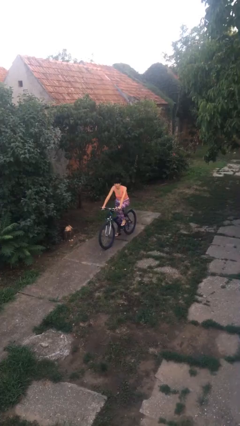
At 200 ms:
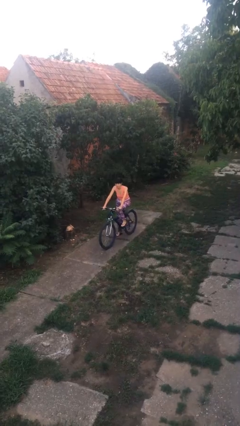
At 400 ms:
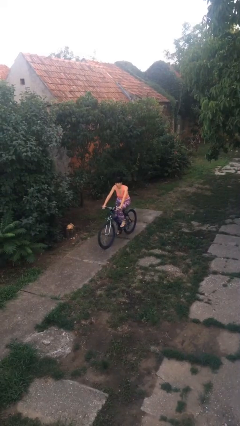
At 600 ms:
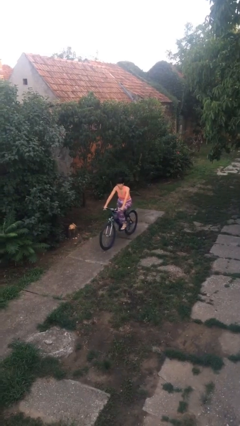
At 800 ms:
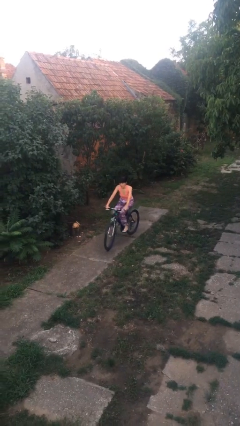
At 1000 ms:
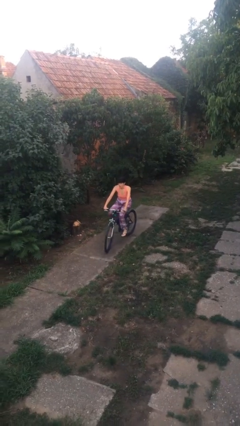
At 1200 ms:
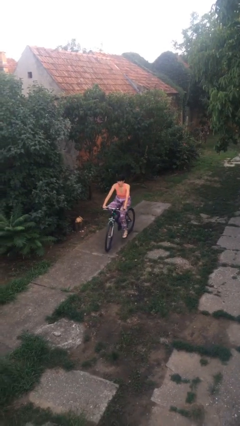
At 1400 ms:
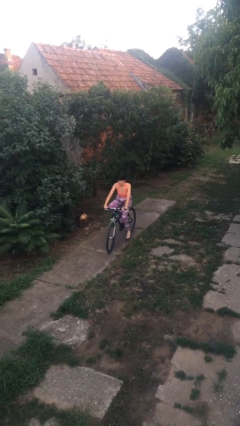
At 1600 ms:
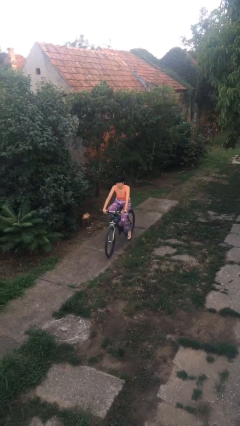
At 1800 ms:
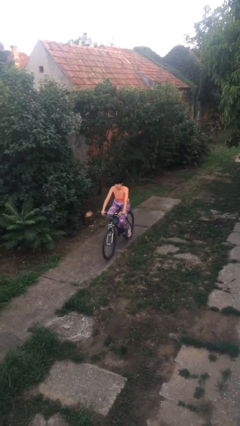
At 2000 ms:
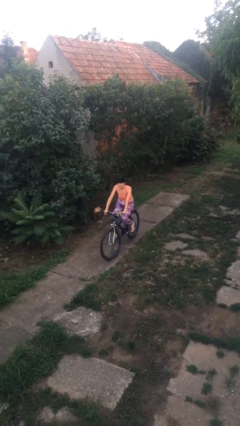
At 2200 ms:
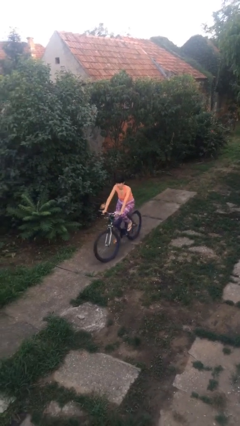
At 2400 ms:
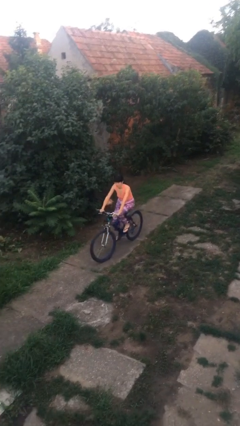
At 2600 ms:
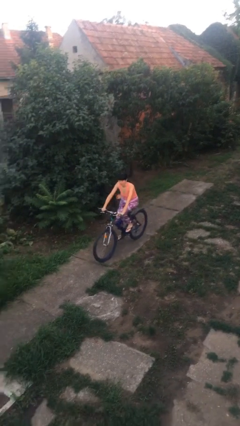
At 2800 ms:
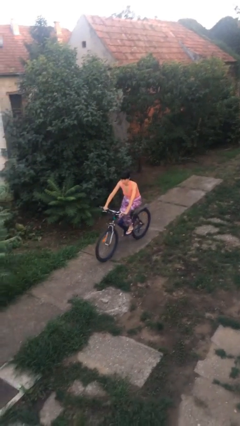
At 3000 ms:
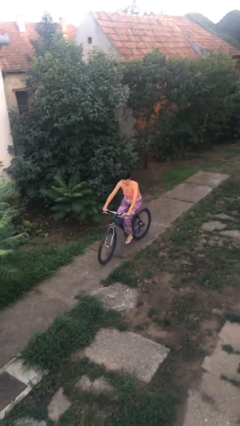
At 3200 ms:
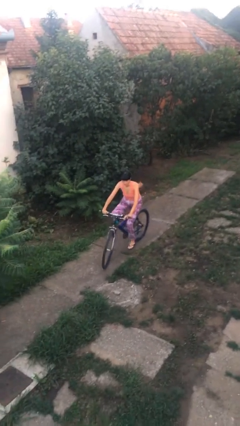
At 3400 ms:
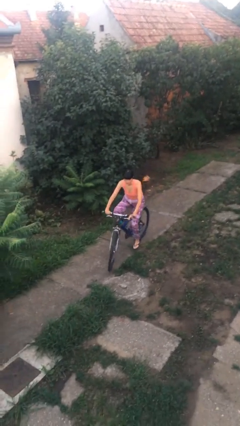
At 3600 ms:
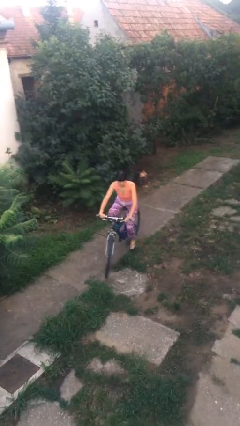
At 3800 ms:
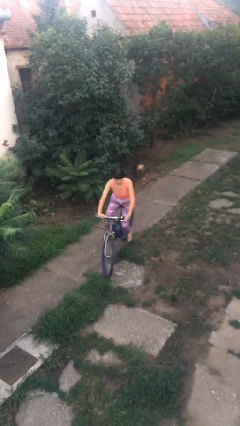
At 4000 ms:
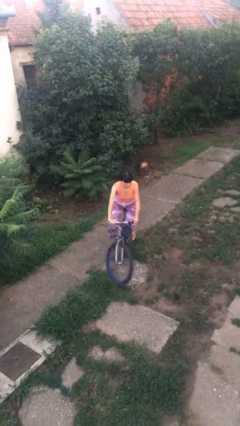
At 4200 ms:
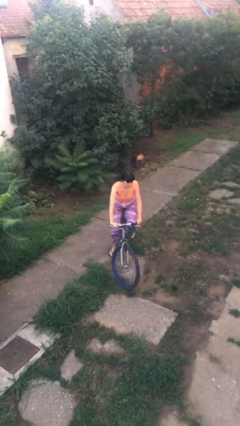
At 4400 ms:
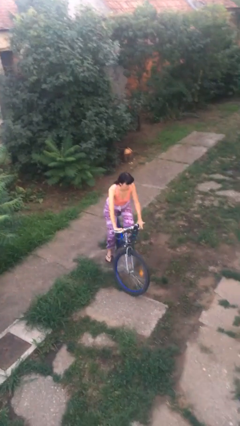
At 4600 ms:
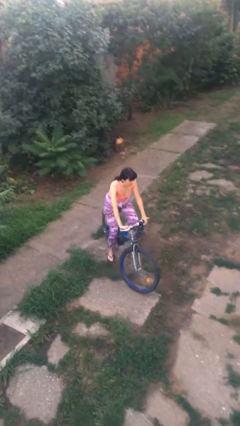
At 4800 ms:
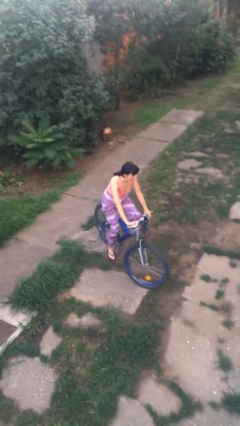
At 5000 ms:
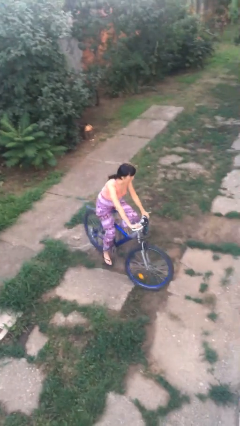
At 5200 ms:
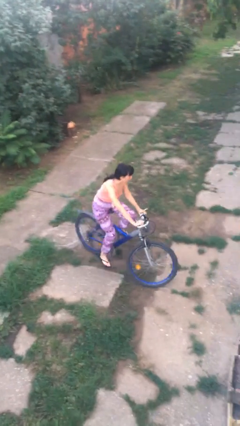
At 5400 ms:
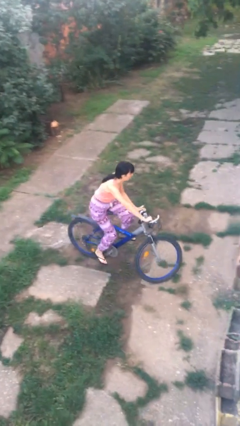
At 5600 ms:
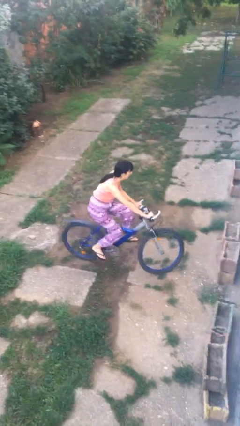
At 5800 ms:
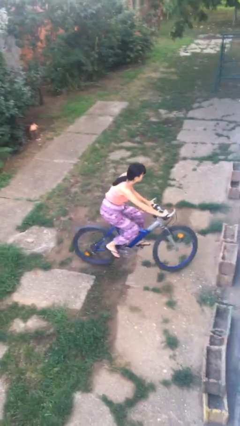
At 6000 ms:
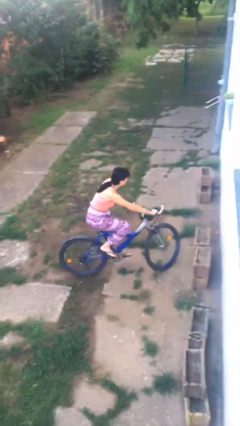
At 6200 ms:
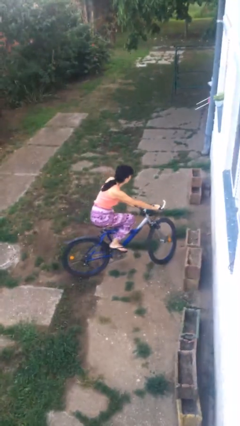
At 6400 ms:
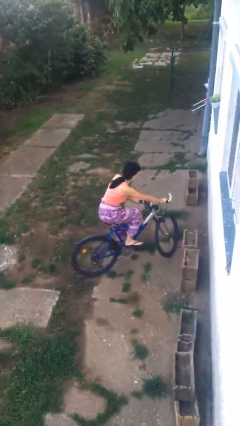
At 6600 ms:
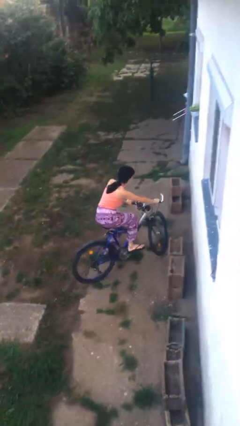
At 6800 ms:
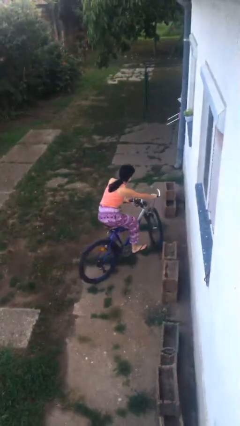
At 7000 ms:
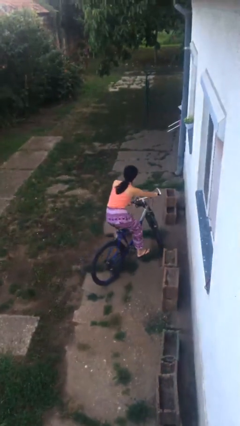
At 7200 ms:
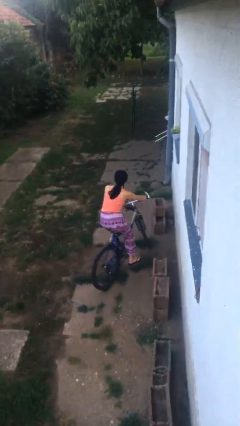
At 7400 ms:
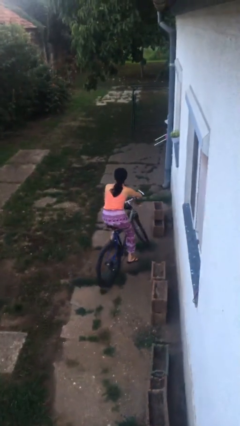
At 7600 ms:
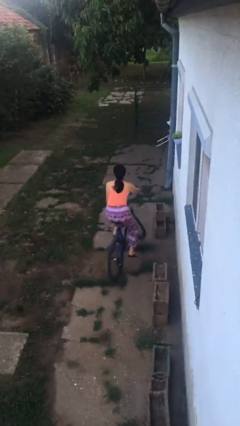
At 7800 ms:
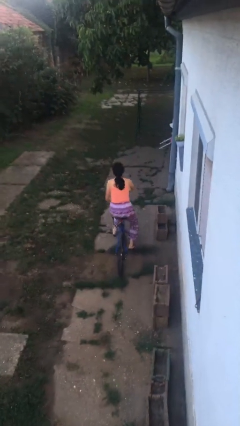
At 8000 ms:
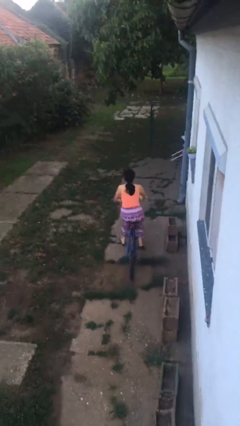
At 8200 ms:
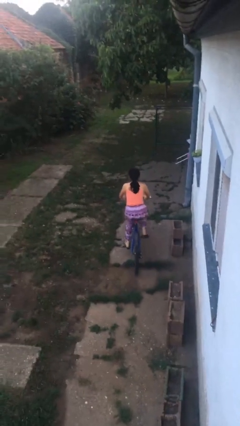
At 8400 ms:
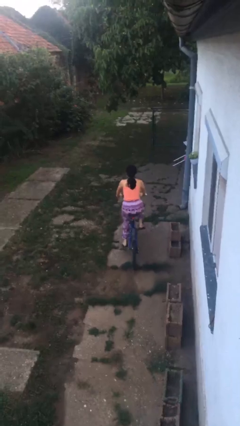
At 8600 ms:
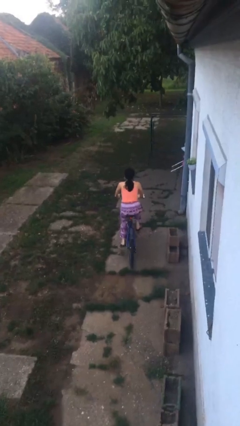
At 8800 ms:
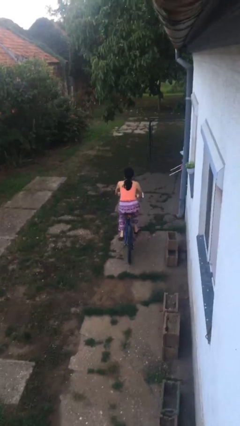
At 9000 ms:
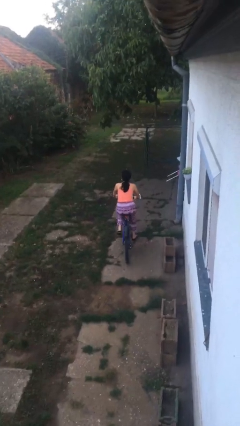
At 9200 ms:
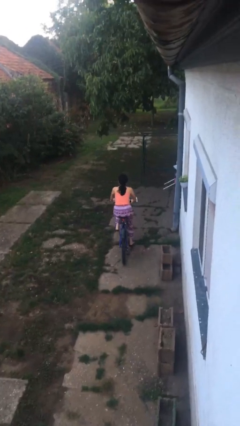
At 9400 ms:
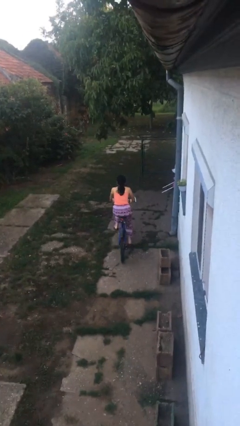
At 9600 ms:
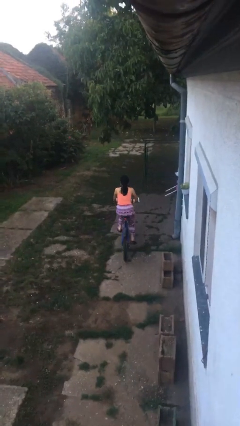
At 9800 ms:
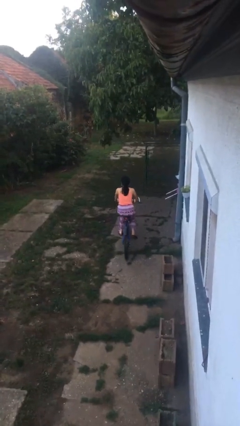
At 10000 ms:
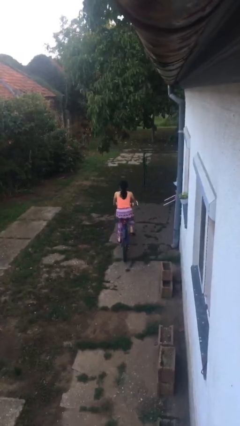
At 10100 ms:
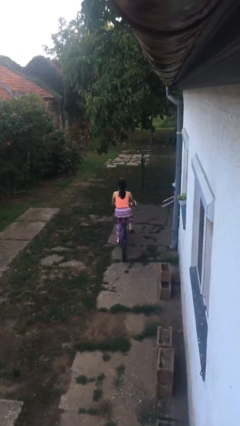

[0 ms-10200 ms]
person rides bicycle

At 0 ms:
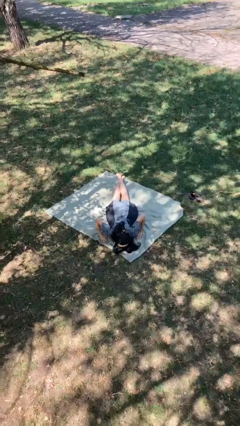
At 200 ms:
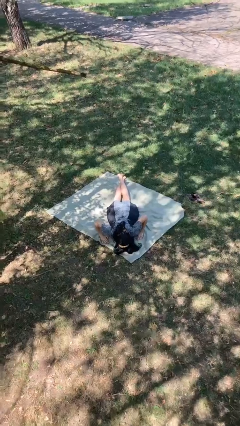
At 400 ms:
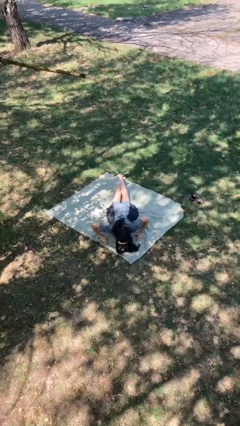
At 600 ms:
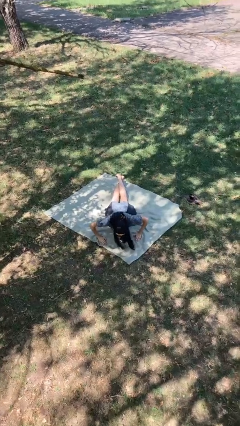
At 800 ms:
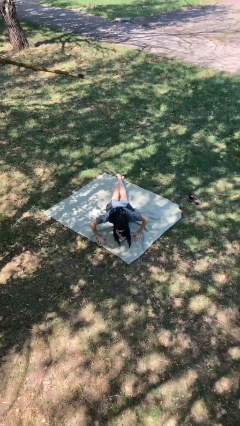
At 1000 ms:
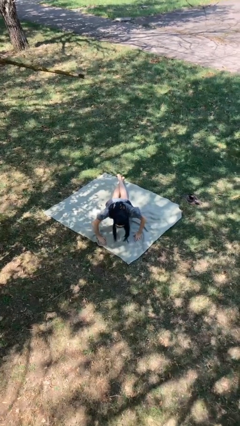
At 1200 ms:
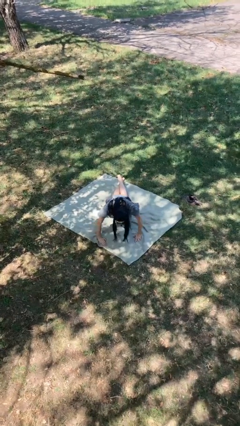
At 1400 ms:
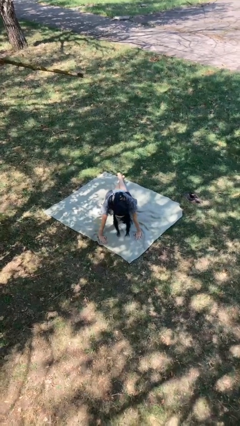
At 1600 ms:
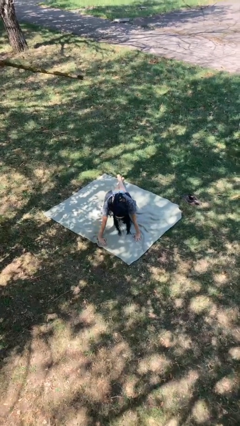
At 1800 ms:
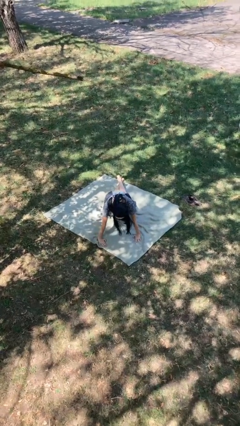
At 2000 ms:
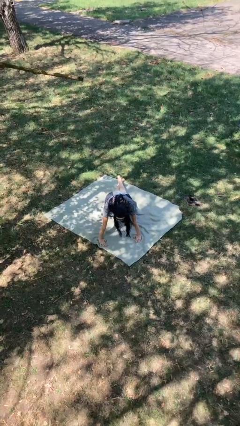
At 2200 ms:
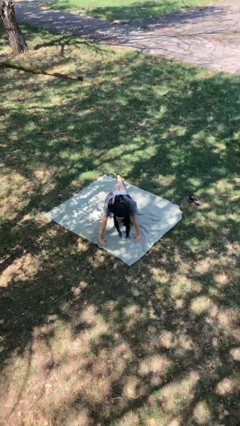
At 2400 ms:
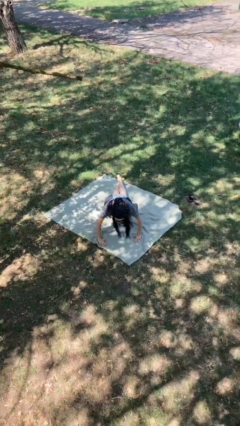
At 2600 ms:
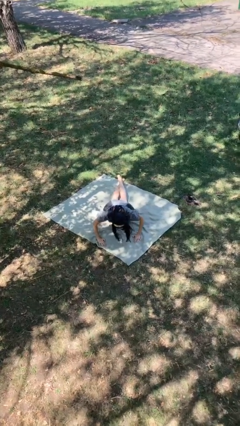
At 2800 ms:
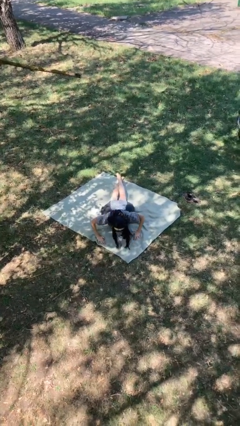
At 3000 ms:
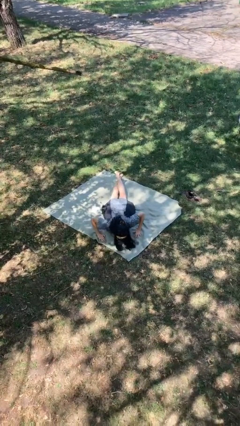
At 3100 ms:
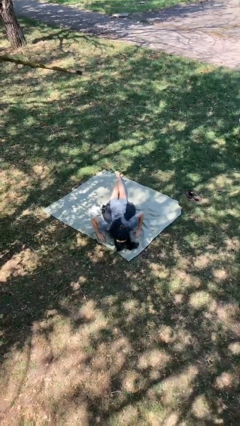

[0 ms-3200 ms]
person exercises with pushup

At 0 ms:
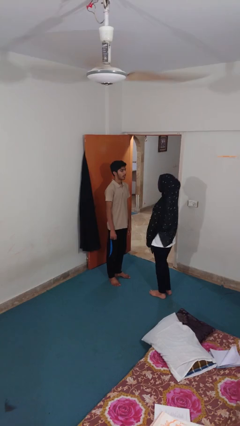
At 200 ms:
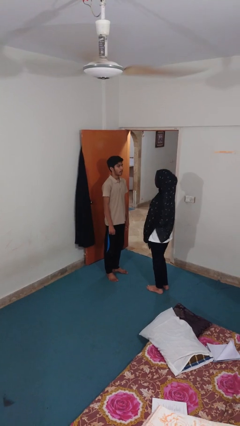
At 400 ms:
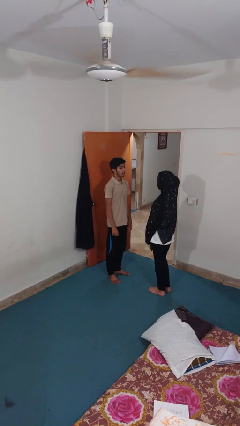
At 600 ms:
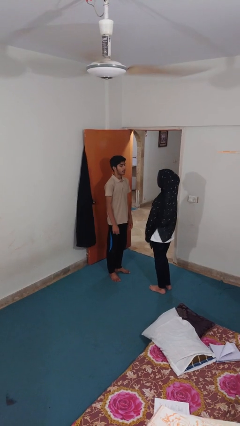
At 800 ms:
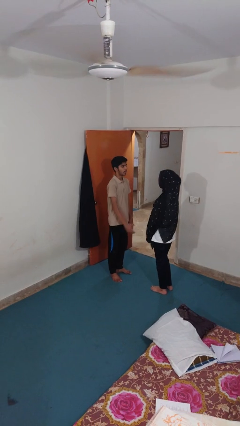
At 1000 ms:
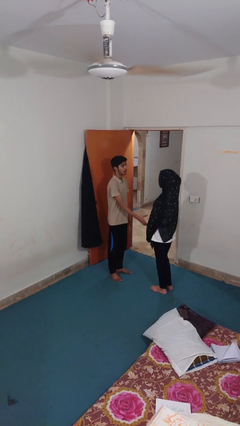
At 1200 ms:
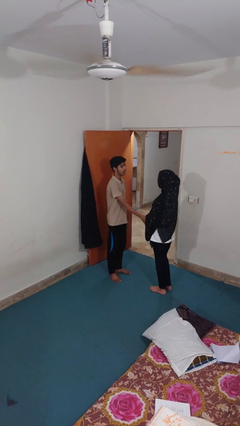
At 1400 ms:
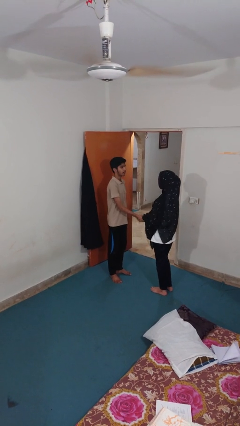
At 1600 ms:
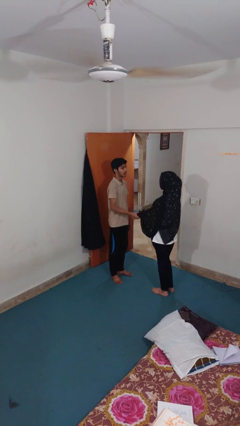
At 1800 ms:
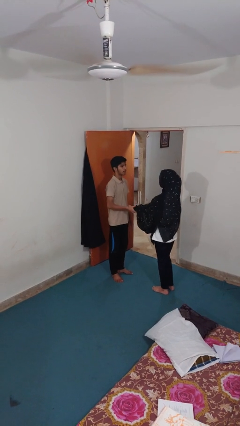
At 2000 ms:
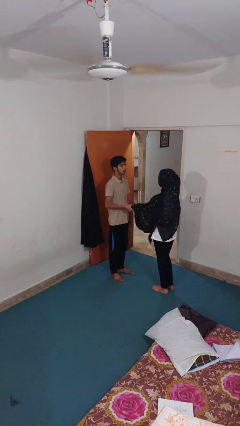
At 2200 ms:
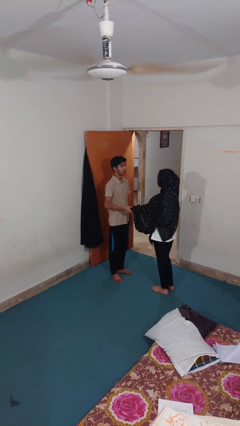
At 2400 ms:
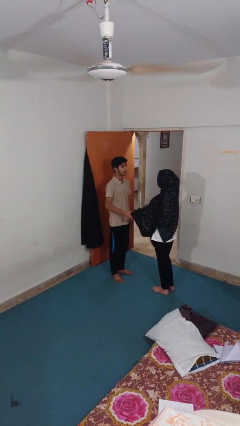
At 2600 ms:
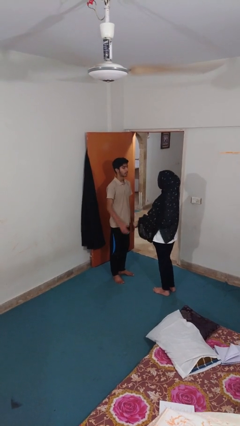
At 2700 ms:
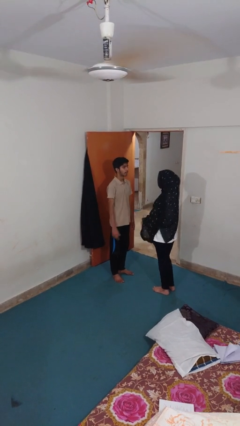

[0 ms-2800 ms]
person grabs person by forearm

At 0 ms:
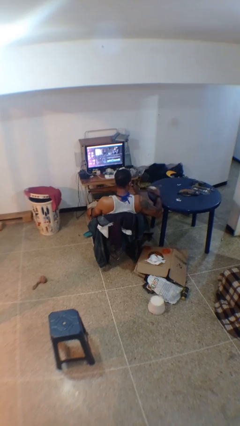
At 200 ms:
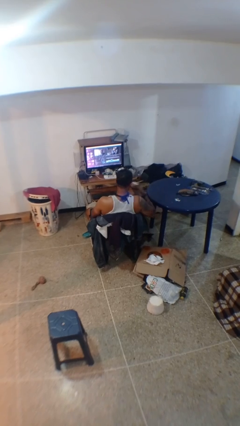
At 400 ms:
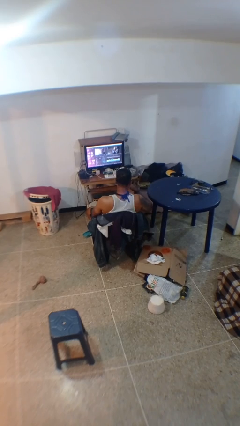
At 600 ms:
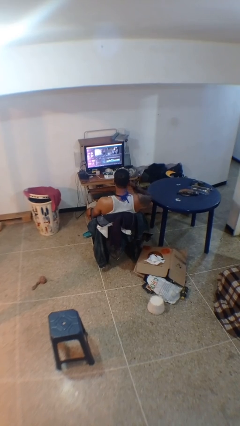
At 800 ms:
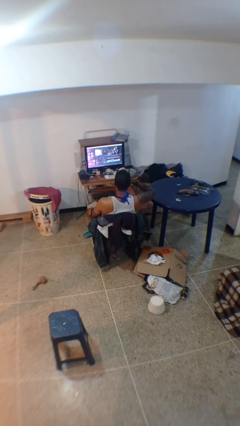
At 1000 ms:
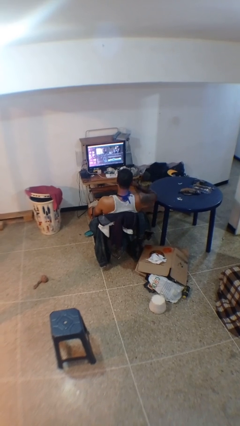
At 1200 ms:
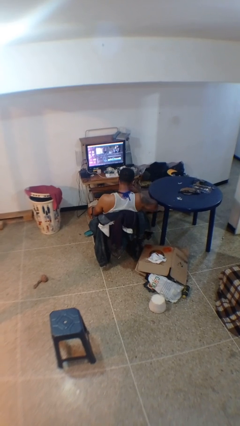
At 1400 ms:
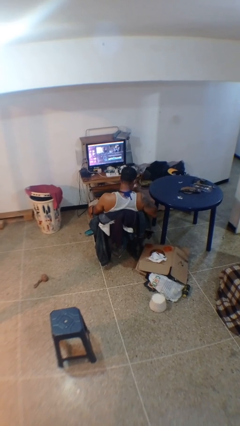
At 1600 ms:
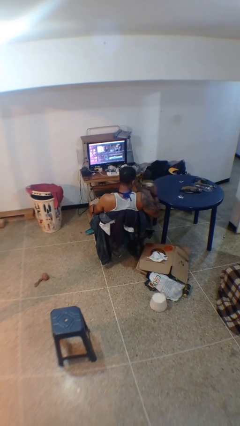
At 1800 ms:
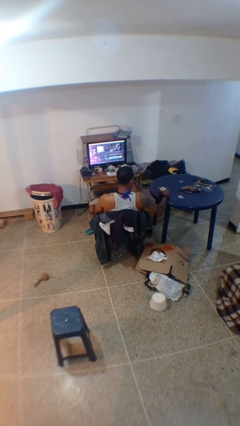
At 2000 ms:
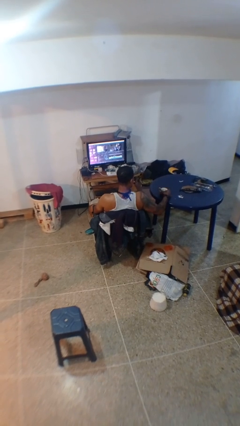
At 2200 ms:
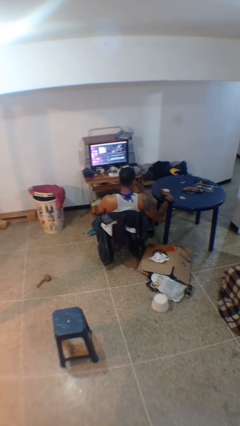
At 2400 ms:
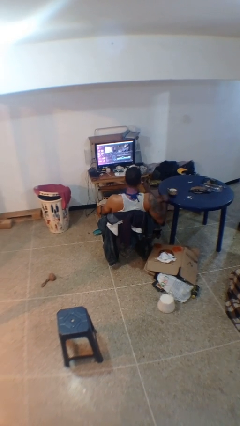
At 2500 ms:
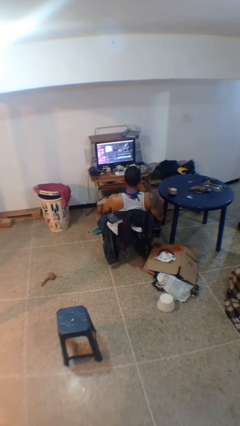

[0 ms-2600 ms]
person drinks from mug
